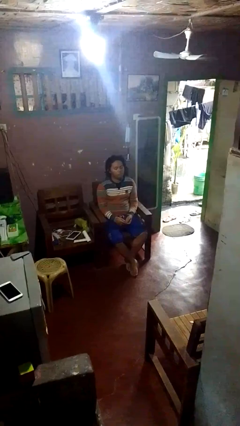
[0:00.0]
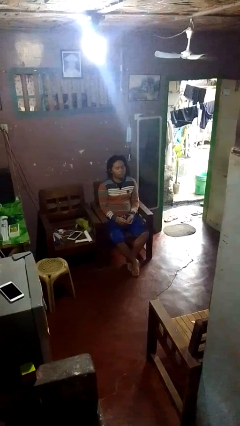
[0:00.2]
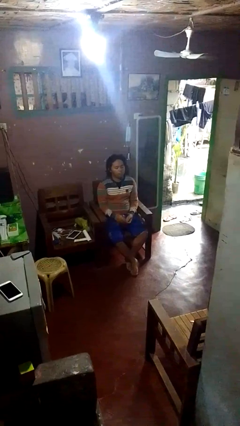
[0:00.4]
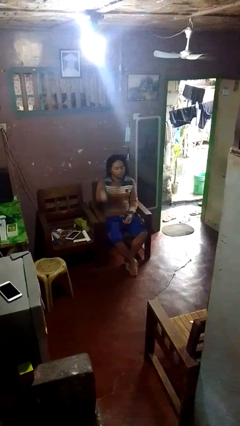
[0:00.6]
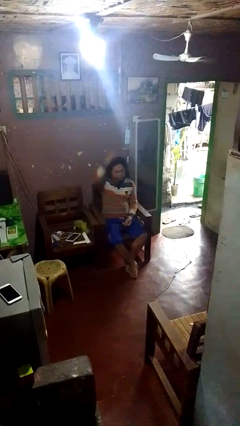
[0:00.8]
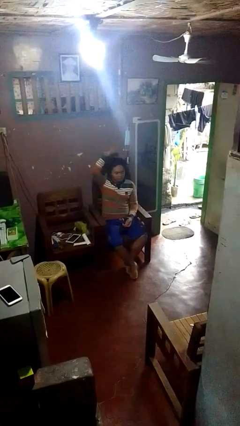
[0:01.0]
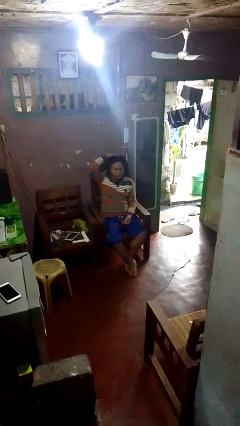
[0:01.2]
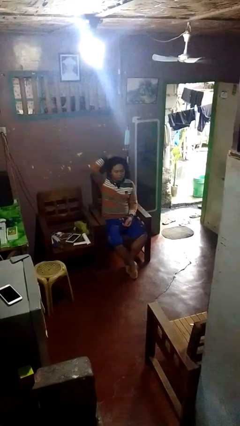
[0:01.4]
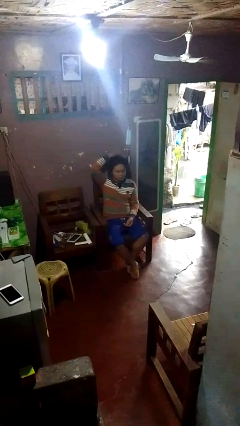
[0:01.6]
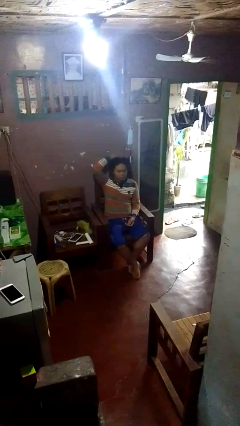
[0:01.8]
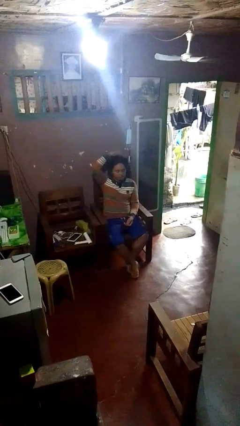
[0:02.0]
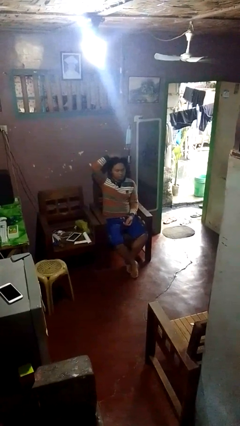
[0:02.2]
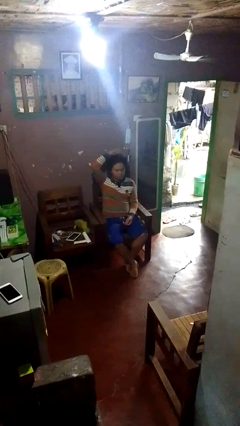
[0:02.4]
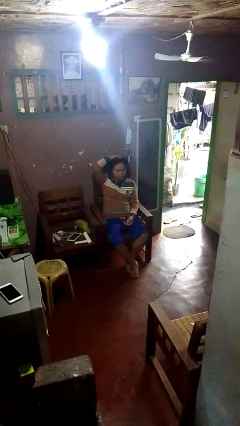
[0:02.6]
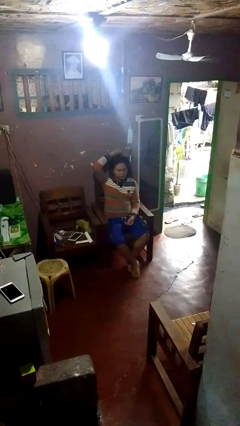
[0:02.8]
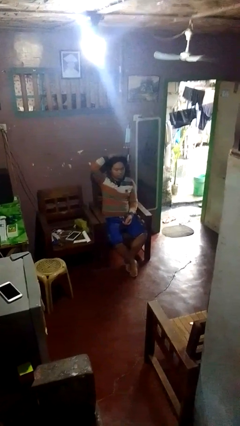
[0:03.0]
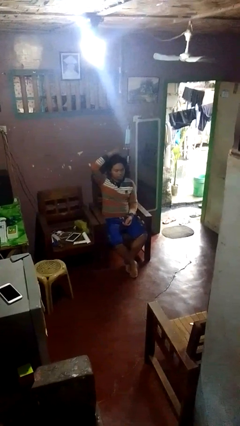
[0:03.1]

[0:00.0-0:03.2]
person pats head

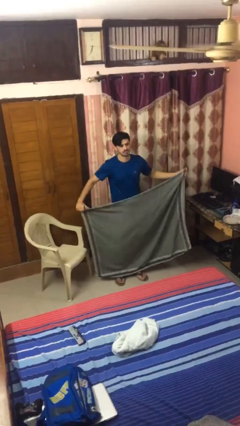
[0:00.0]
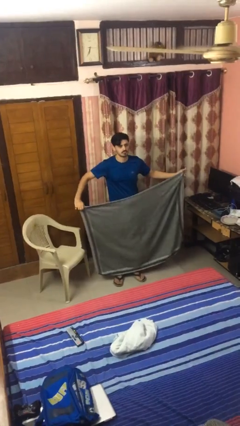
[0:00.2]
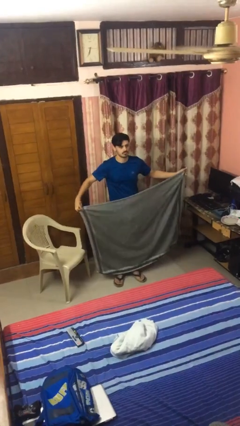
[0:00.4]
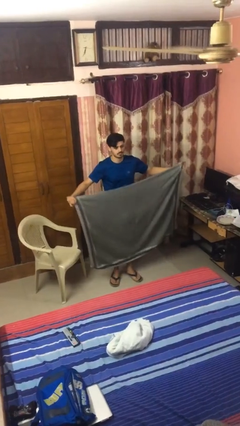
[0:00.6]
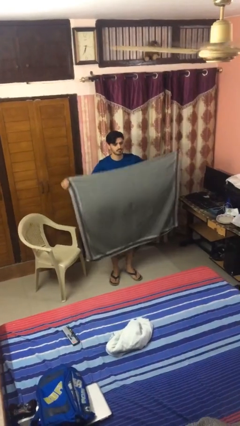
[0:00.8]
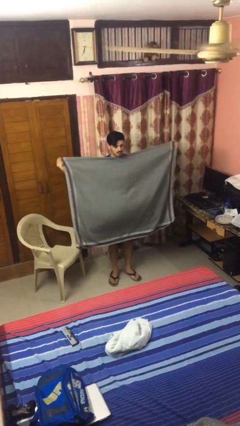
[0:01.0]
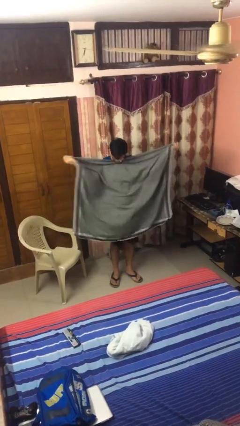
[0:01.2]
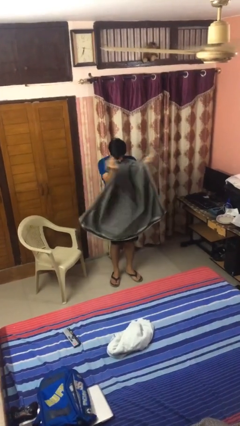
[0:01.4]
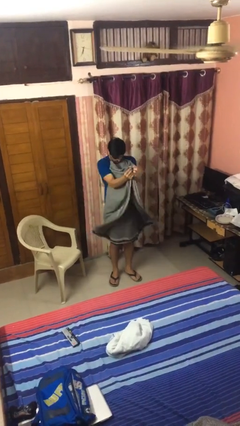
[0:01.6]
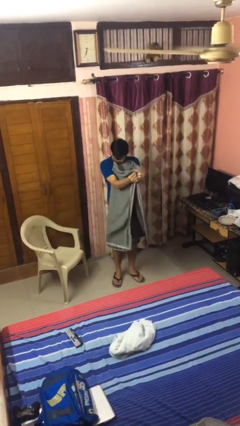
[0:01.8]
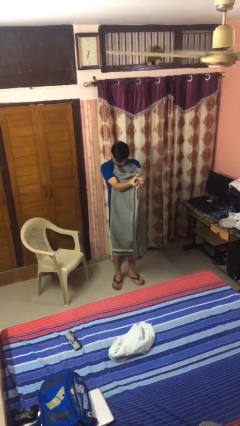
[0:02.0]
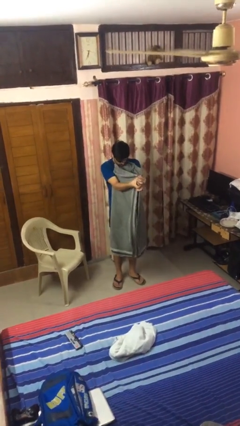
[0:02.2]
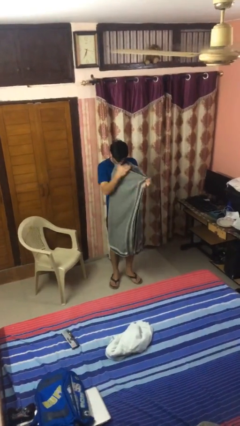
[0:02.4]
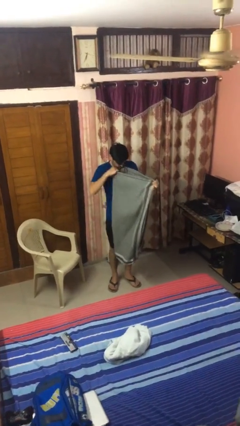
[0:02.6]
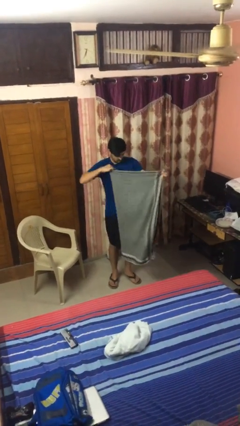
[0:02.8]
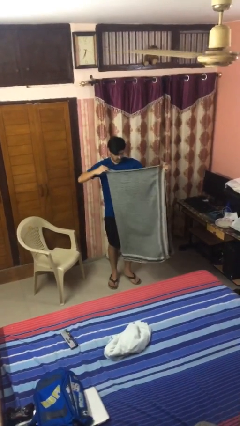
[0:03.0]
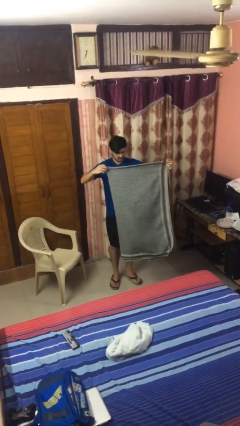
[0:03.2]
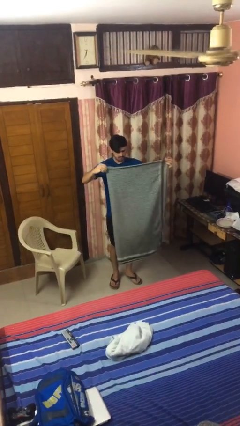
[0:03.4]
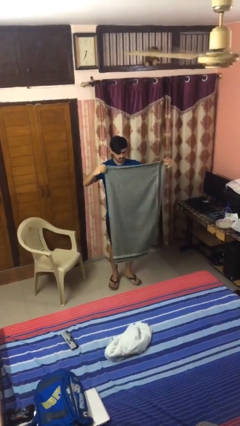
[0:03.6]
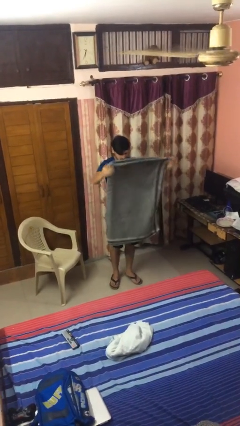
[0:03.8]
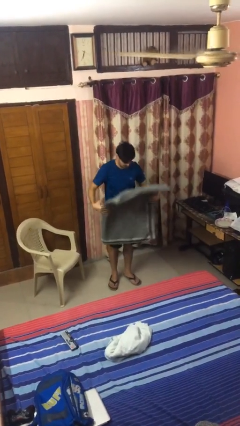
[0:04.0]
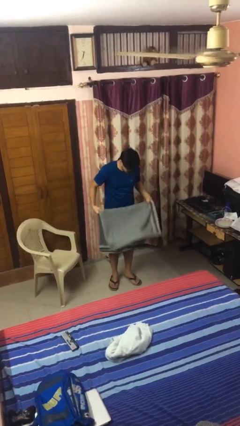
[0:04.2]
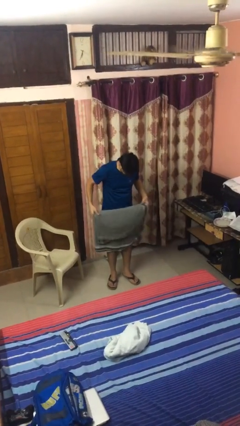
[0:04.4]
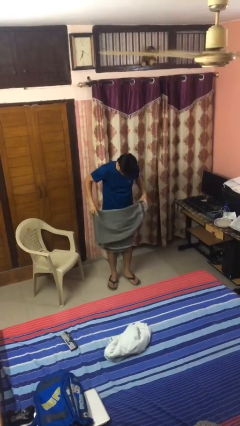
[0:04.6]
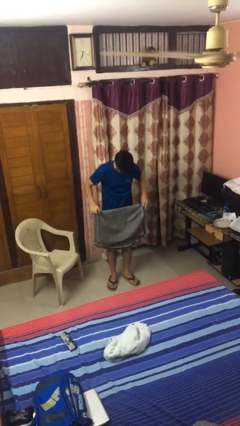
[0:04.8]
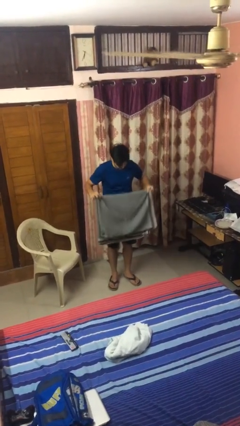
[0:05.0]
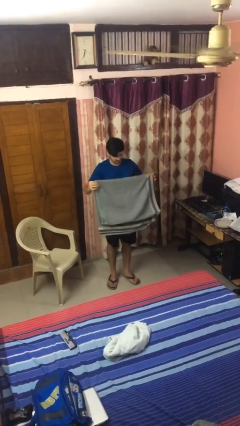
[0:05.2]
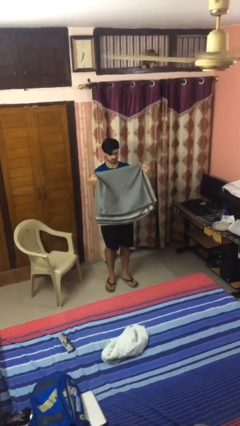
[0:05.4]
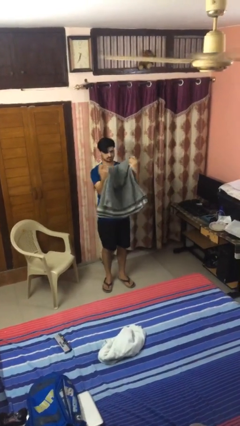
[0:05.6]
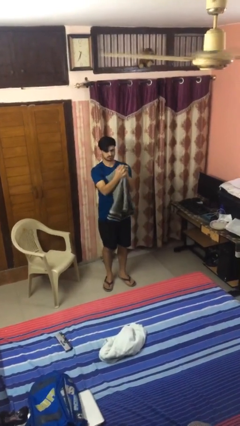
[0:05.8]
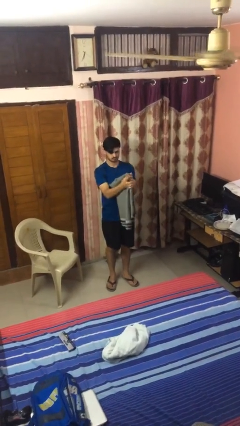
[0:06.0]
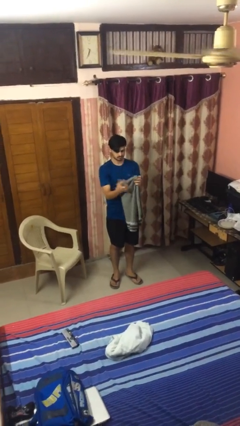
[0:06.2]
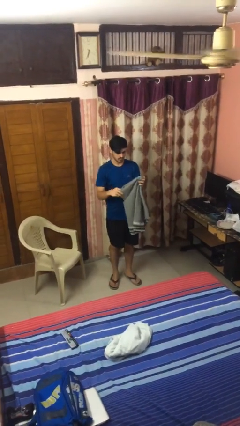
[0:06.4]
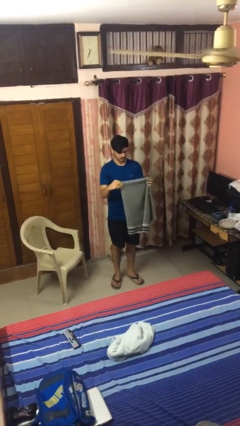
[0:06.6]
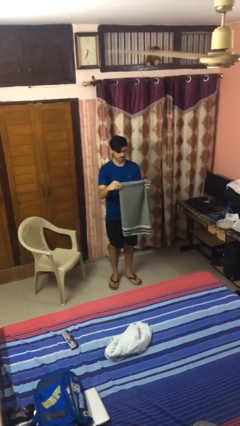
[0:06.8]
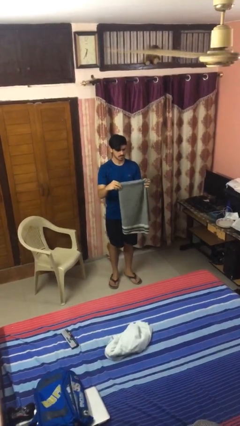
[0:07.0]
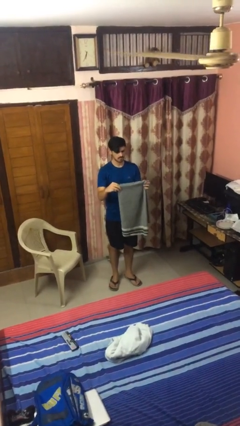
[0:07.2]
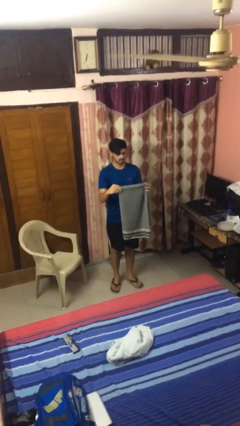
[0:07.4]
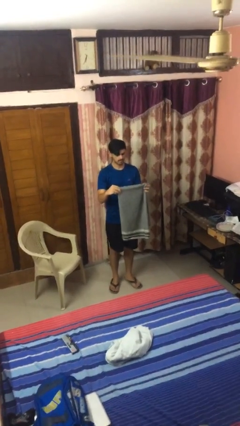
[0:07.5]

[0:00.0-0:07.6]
person folds blanket

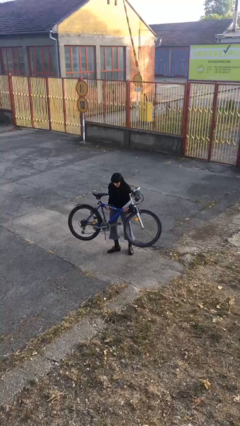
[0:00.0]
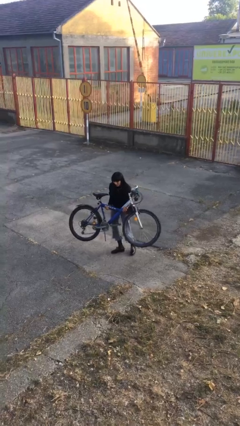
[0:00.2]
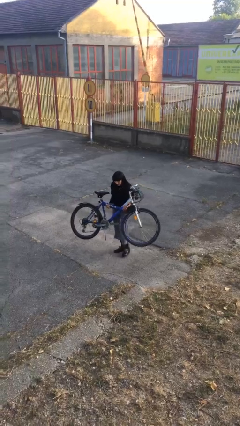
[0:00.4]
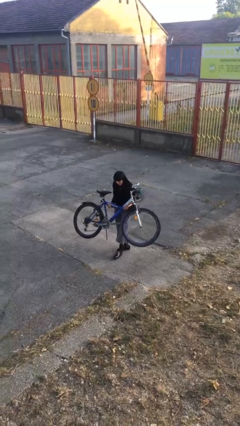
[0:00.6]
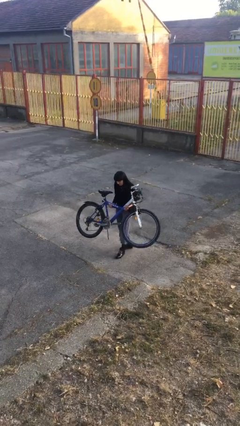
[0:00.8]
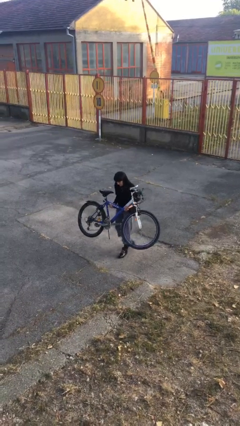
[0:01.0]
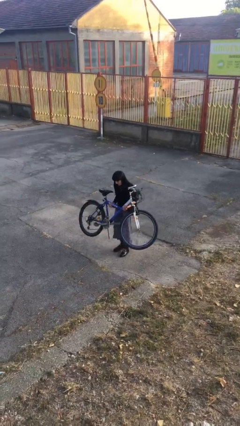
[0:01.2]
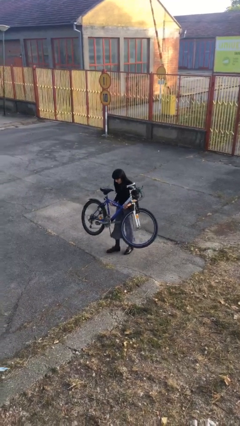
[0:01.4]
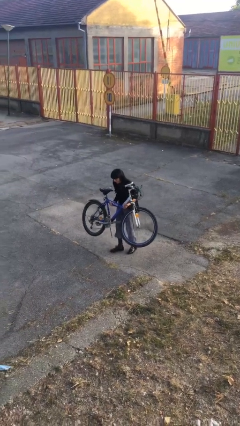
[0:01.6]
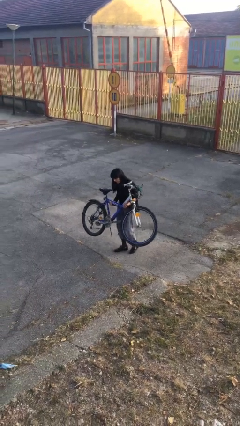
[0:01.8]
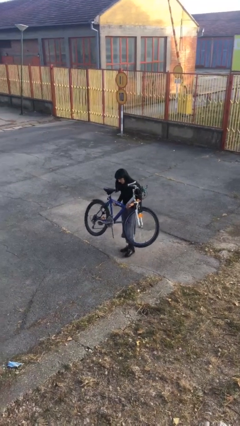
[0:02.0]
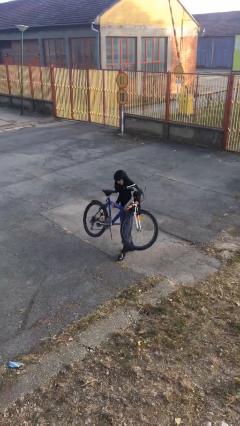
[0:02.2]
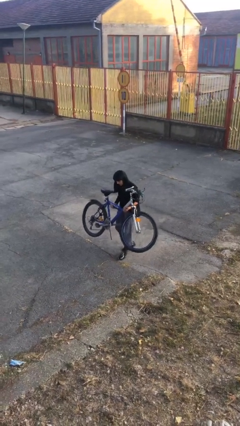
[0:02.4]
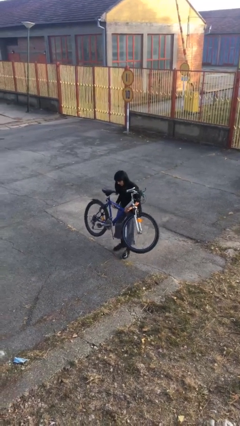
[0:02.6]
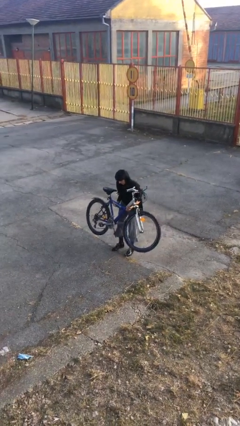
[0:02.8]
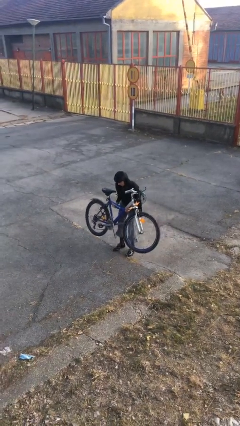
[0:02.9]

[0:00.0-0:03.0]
person carries heavy object

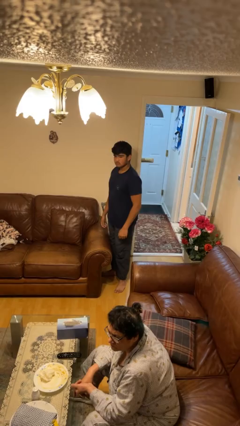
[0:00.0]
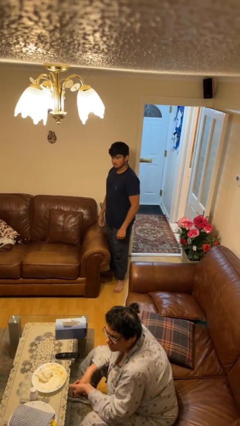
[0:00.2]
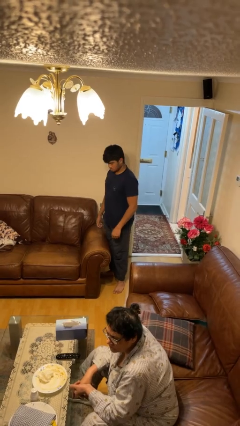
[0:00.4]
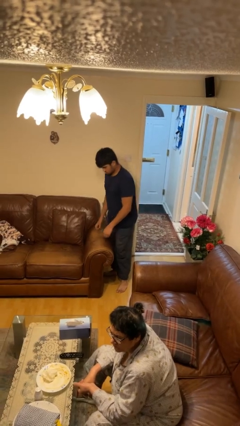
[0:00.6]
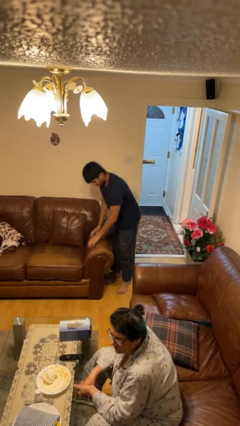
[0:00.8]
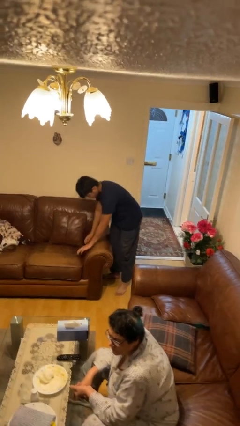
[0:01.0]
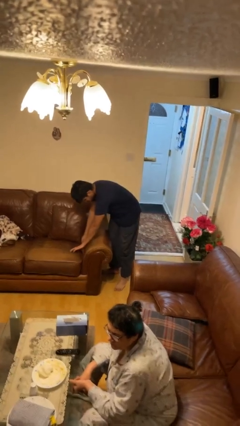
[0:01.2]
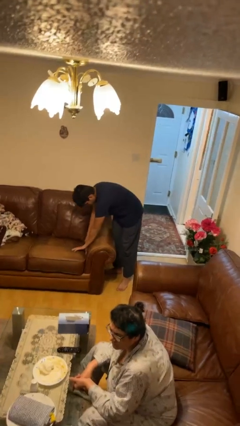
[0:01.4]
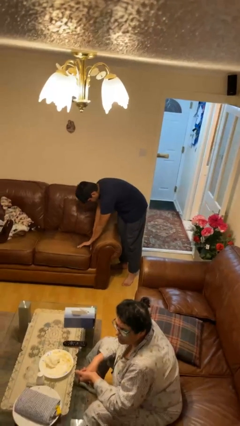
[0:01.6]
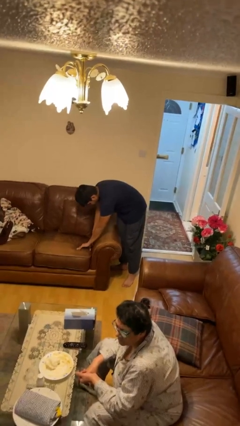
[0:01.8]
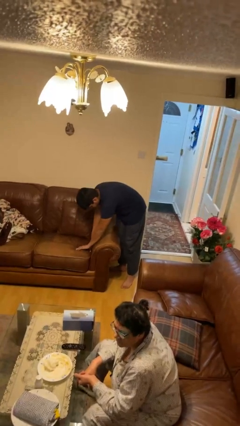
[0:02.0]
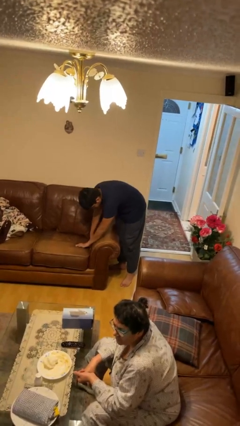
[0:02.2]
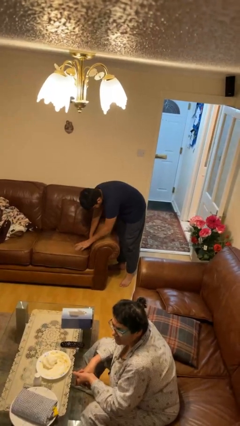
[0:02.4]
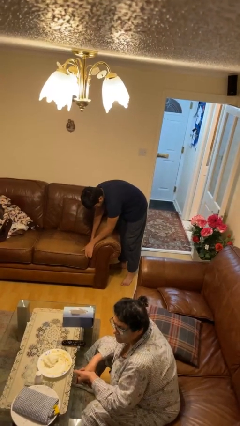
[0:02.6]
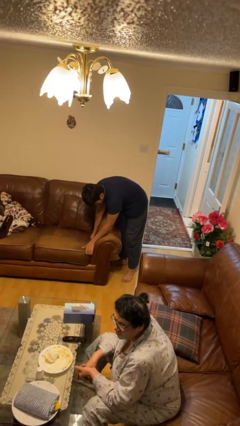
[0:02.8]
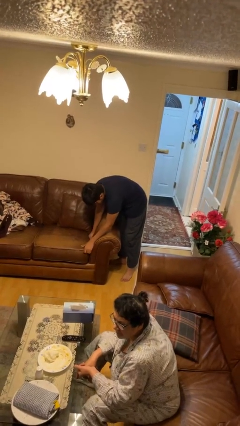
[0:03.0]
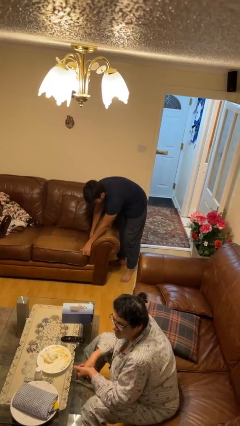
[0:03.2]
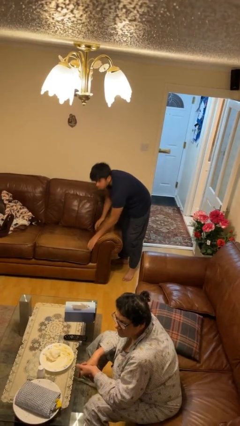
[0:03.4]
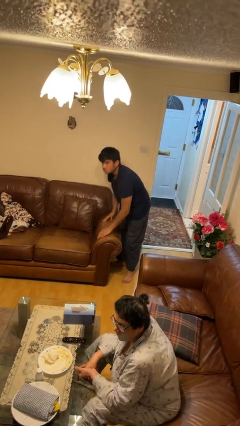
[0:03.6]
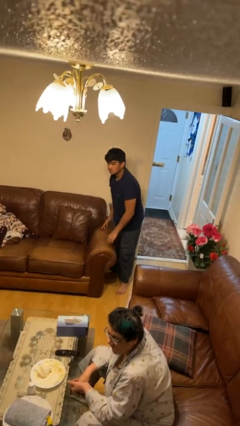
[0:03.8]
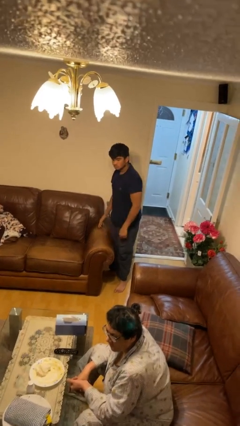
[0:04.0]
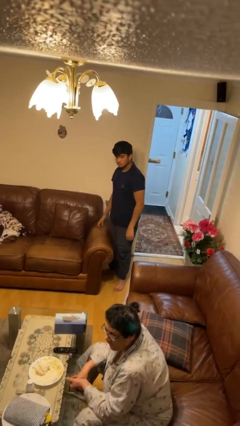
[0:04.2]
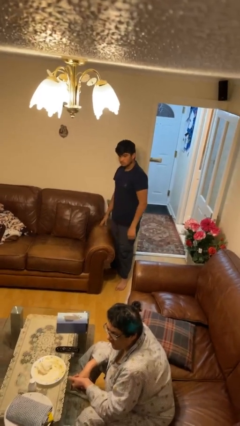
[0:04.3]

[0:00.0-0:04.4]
person searches in couch
